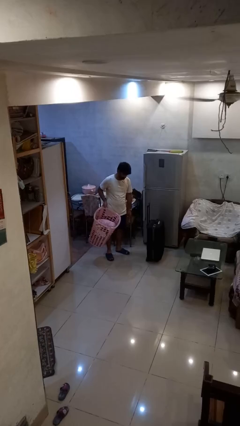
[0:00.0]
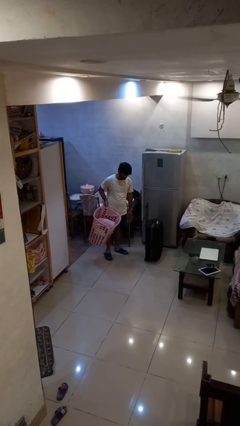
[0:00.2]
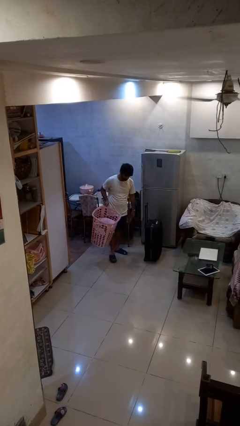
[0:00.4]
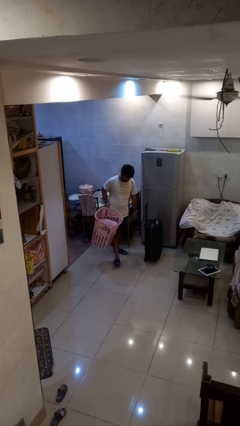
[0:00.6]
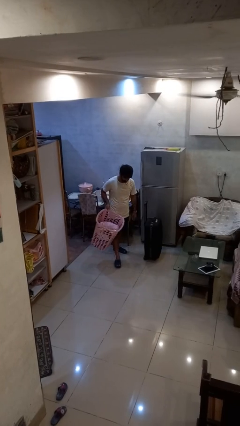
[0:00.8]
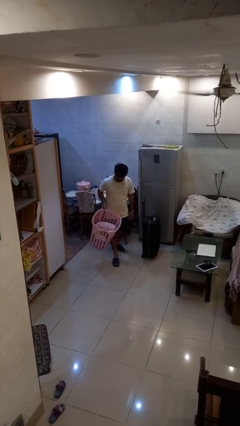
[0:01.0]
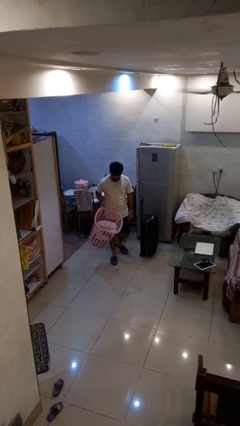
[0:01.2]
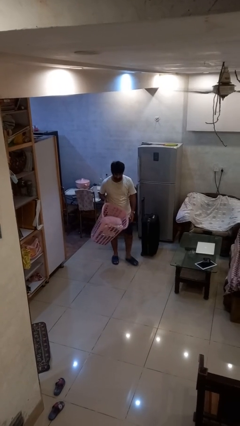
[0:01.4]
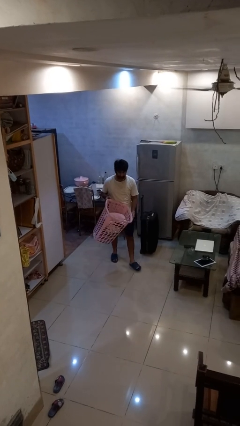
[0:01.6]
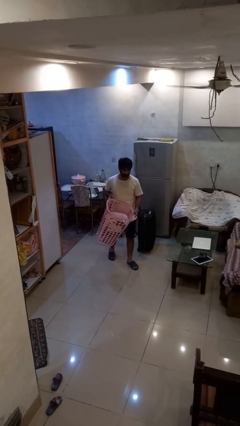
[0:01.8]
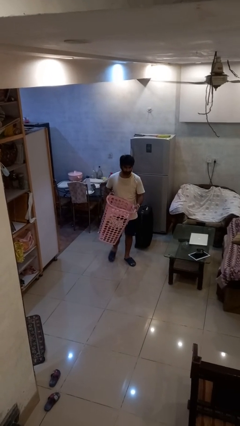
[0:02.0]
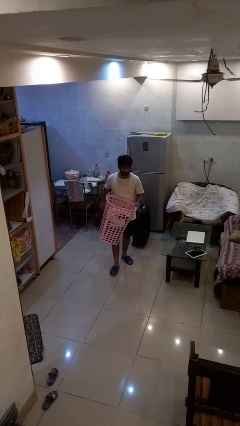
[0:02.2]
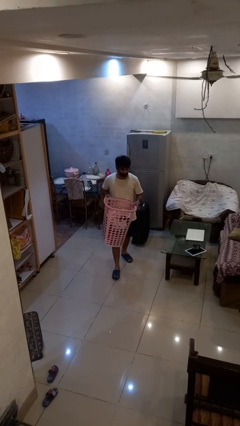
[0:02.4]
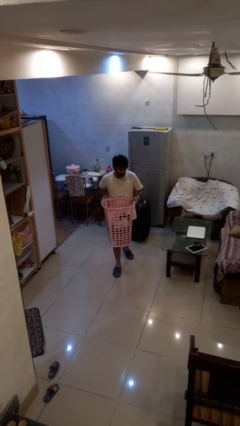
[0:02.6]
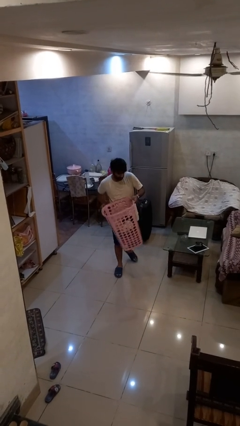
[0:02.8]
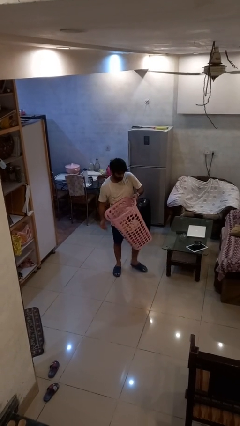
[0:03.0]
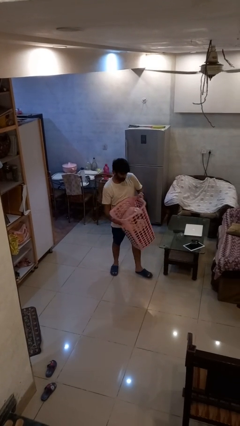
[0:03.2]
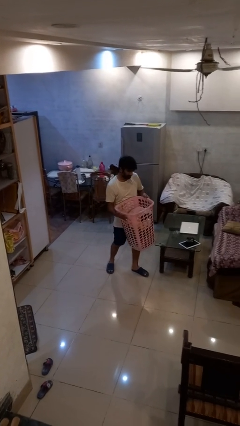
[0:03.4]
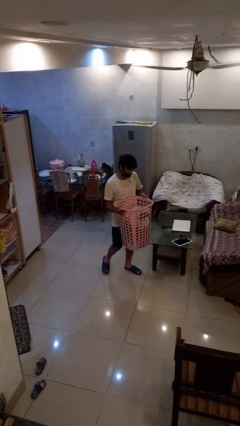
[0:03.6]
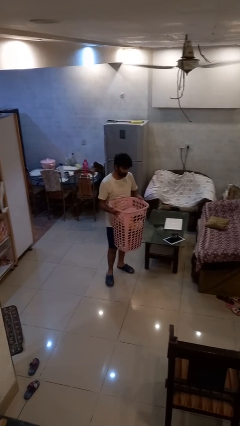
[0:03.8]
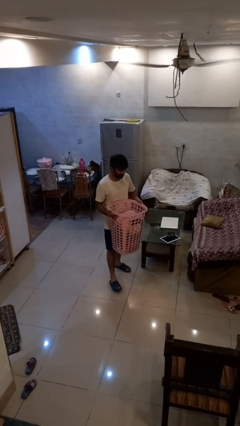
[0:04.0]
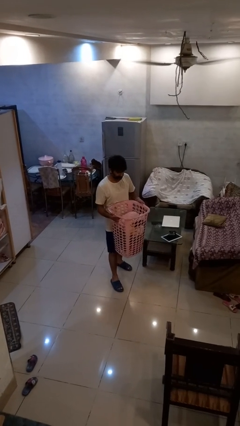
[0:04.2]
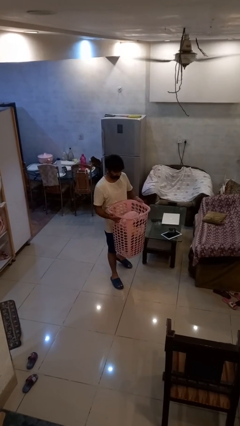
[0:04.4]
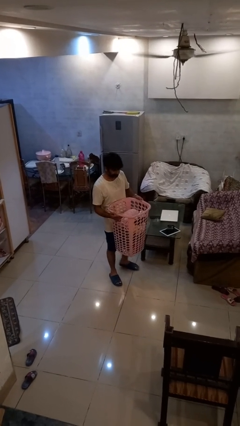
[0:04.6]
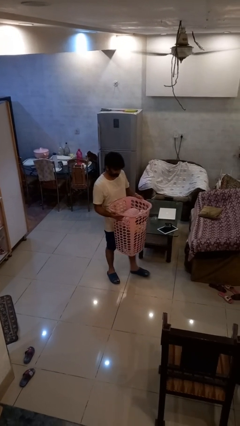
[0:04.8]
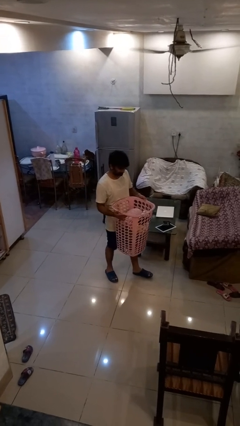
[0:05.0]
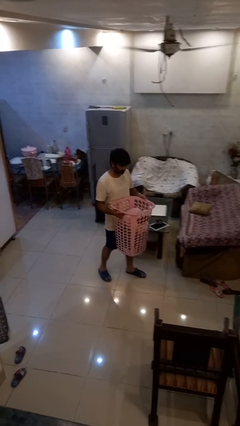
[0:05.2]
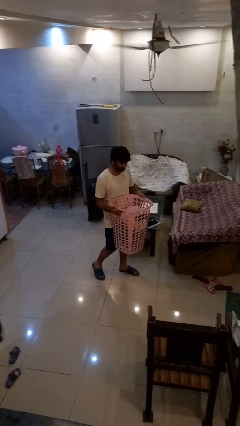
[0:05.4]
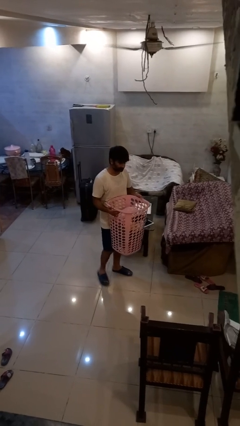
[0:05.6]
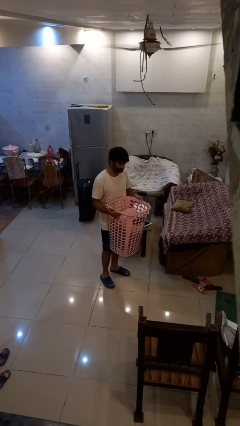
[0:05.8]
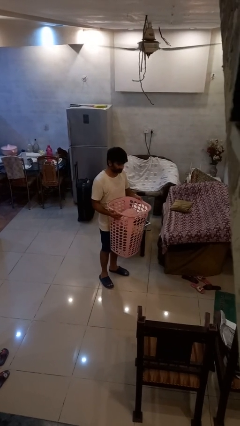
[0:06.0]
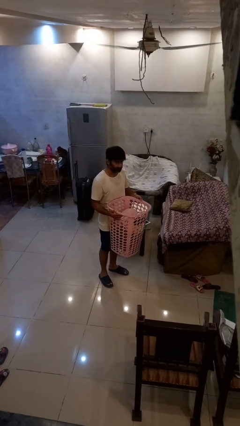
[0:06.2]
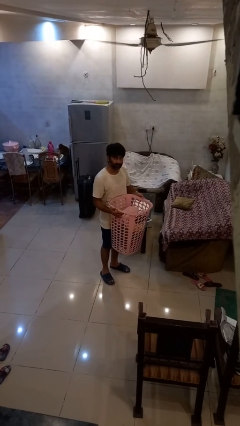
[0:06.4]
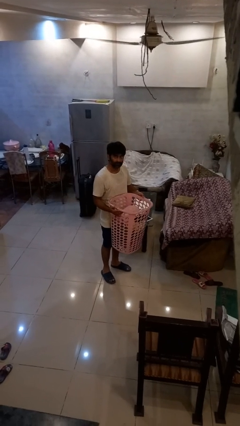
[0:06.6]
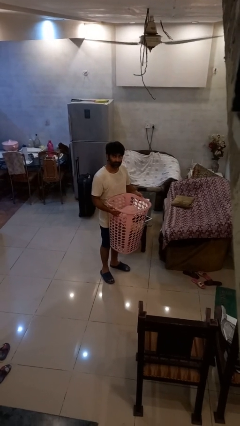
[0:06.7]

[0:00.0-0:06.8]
person carries laundry basket

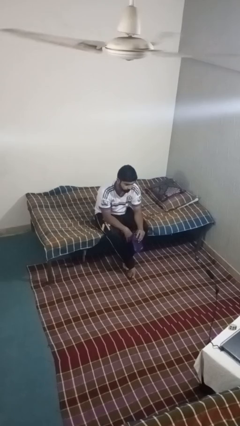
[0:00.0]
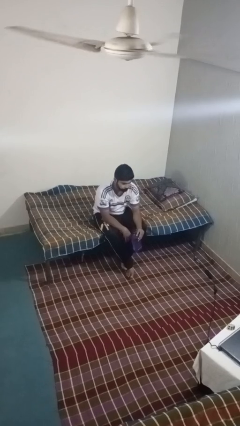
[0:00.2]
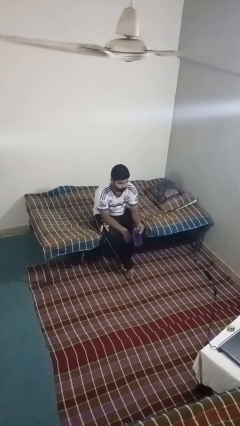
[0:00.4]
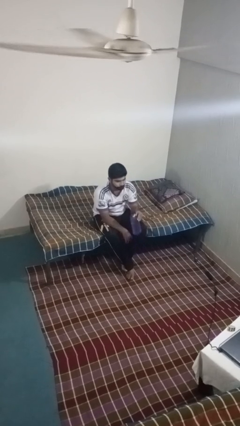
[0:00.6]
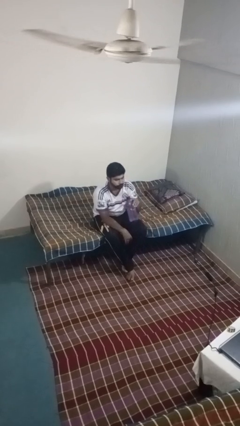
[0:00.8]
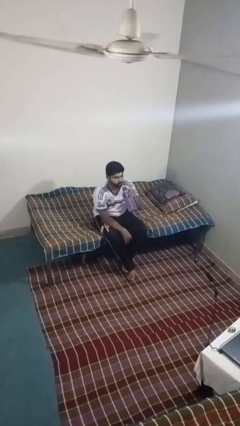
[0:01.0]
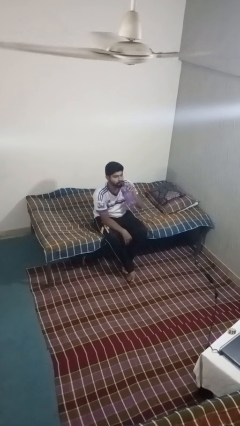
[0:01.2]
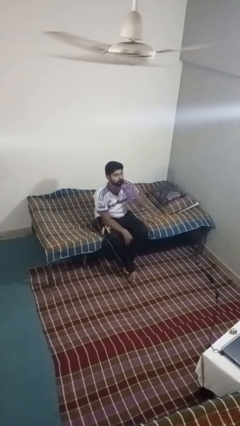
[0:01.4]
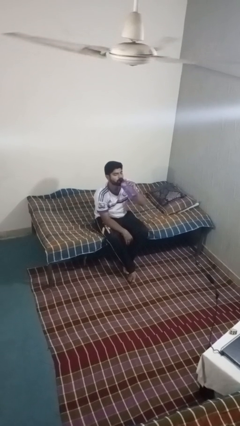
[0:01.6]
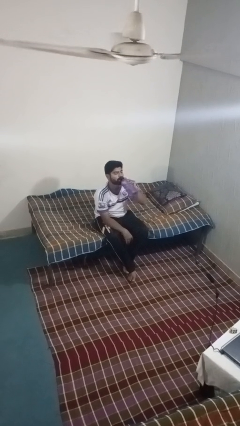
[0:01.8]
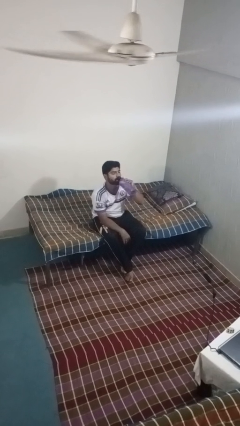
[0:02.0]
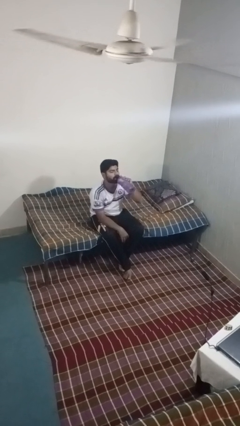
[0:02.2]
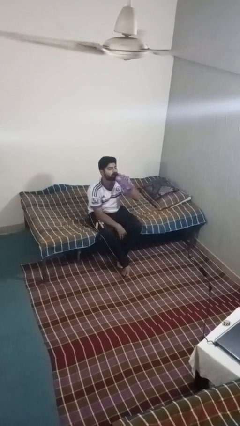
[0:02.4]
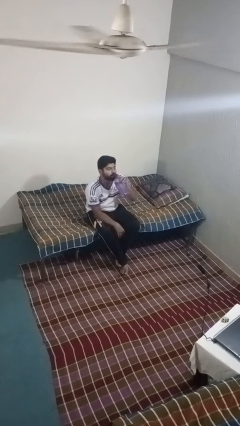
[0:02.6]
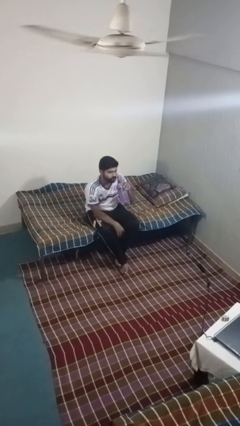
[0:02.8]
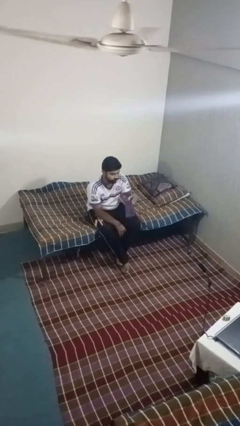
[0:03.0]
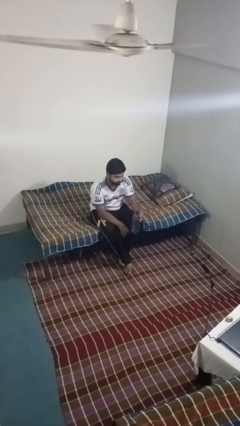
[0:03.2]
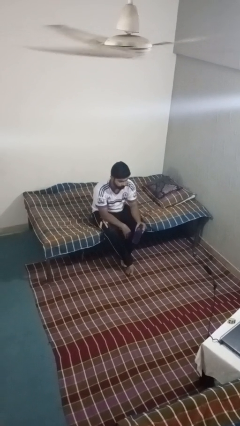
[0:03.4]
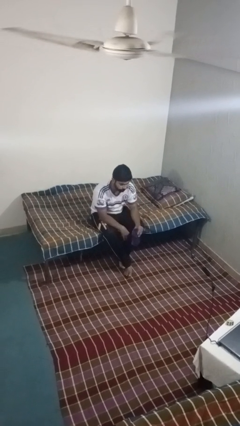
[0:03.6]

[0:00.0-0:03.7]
person drinks from bottle

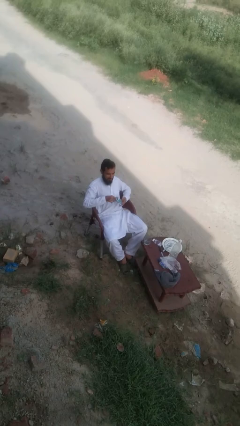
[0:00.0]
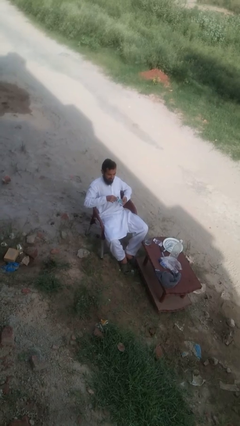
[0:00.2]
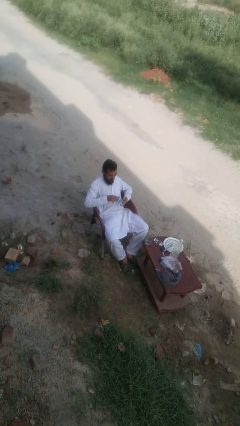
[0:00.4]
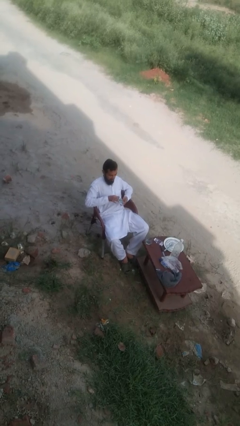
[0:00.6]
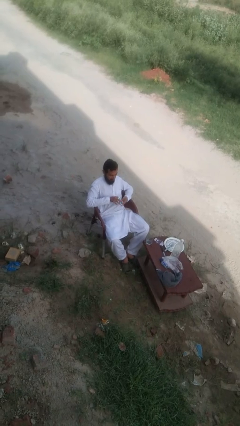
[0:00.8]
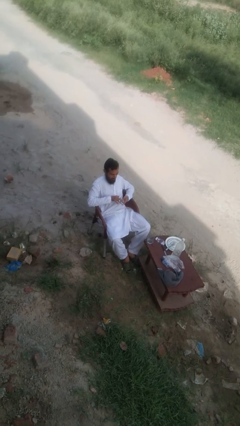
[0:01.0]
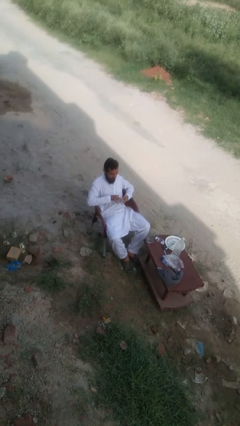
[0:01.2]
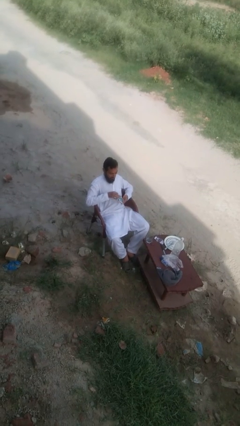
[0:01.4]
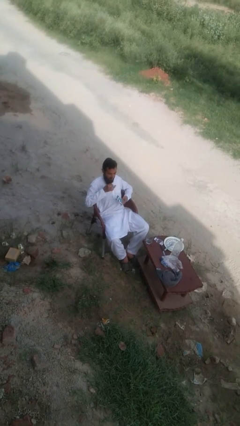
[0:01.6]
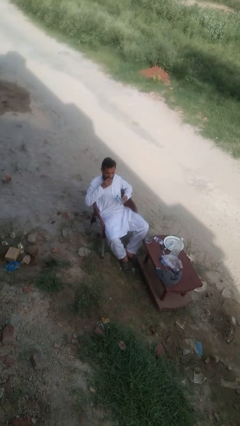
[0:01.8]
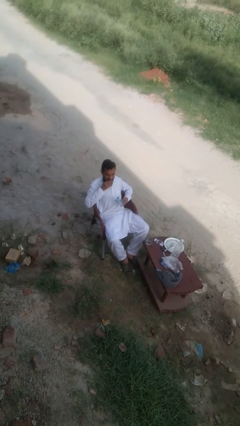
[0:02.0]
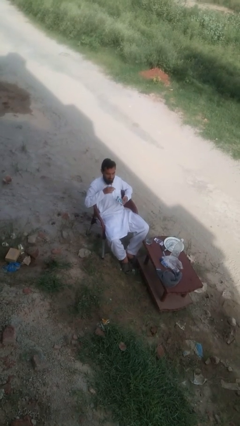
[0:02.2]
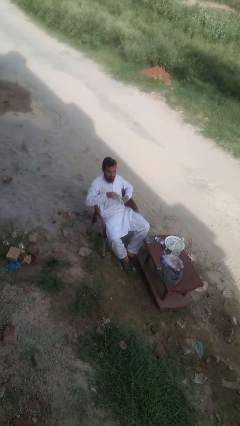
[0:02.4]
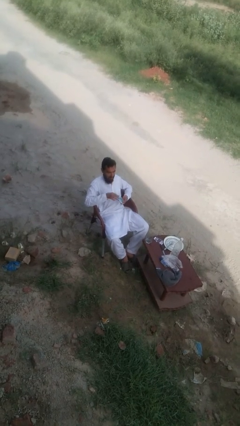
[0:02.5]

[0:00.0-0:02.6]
person eats with hands

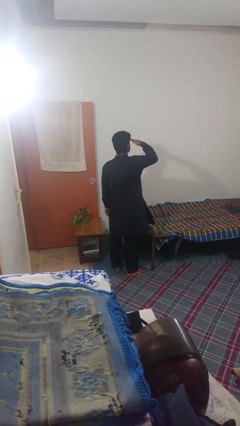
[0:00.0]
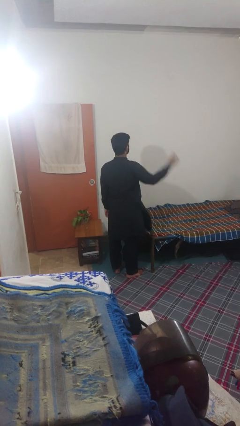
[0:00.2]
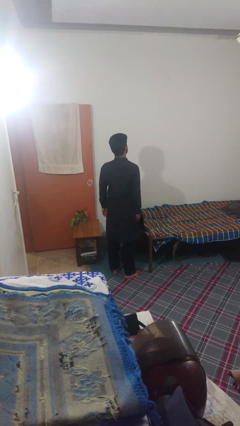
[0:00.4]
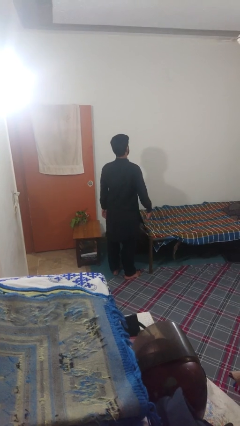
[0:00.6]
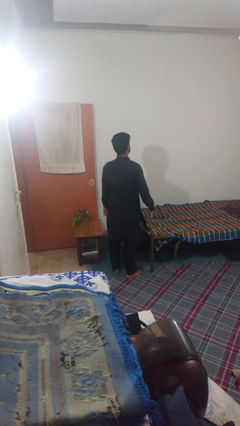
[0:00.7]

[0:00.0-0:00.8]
person salutes

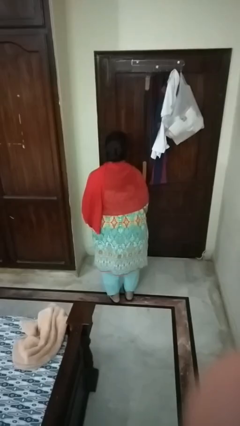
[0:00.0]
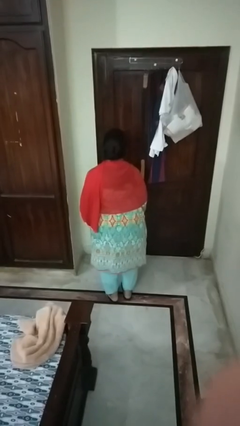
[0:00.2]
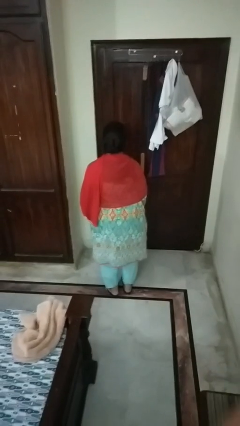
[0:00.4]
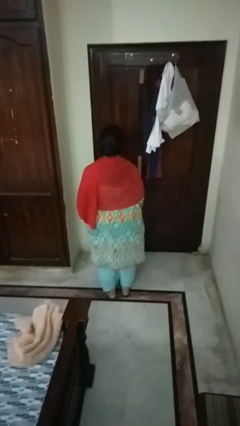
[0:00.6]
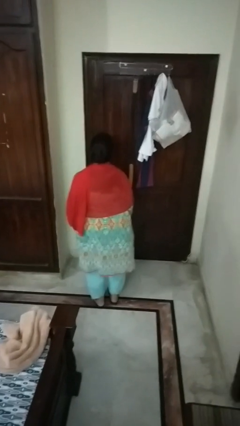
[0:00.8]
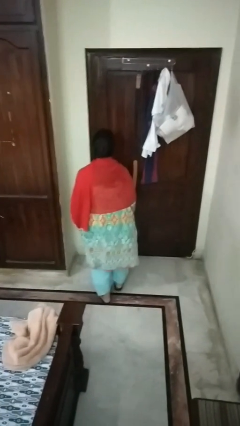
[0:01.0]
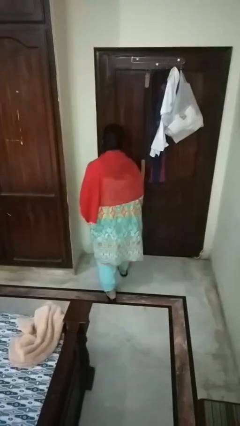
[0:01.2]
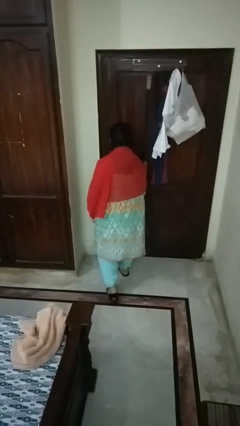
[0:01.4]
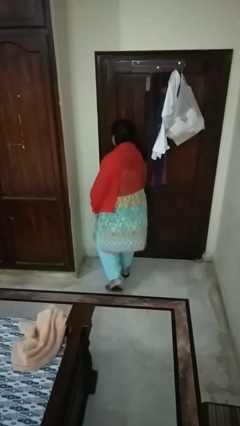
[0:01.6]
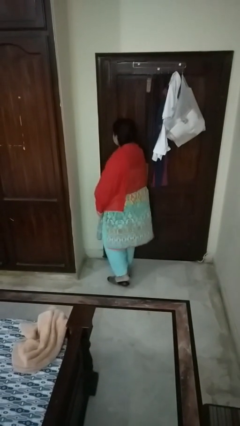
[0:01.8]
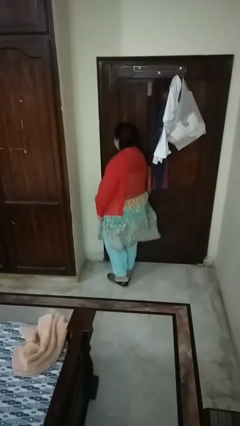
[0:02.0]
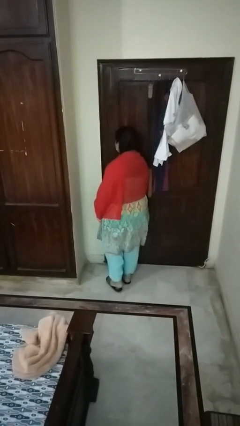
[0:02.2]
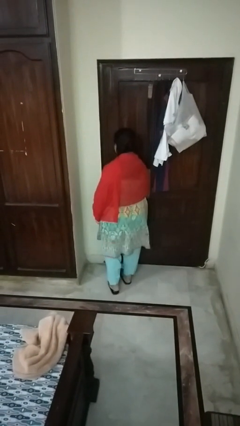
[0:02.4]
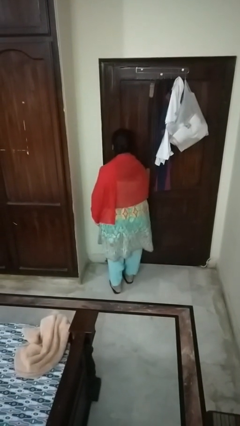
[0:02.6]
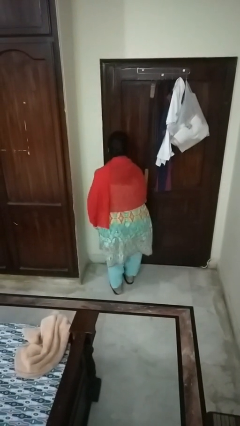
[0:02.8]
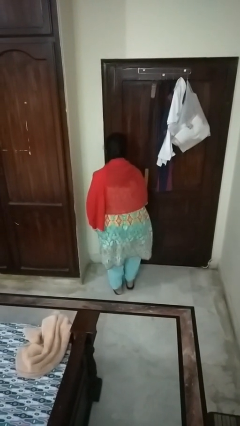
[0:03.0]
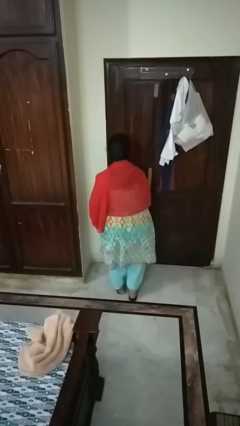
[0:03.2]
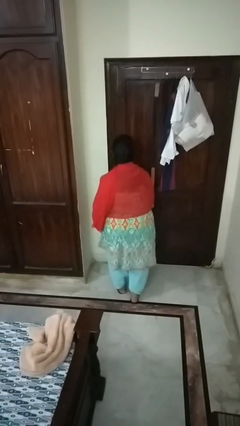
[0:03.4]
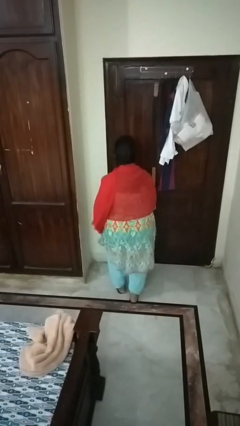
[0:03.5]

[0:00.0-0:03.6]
person bumps into wall
